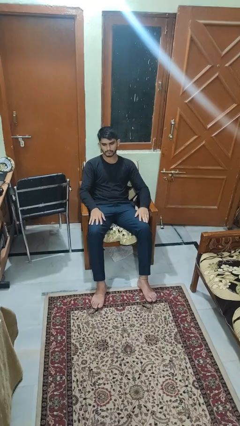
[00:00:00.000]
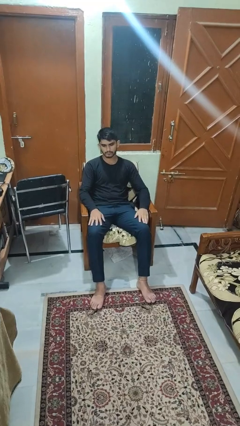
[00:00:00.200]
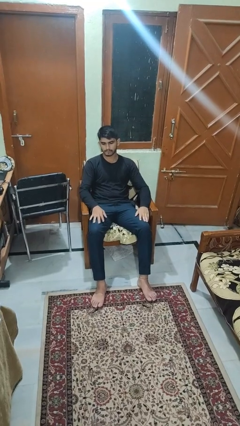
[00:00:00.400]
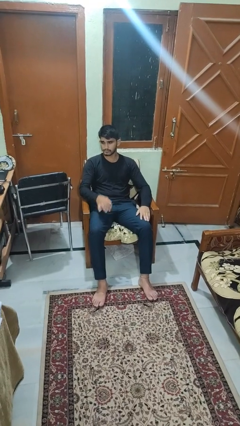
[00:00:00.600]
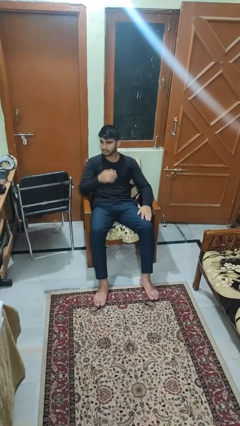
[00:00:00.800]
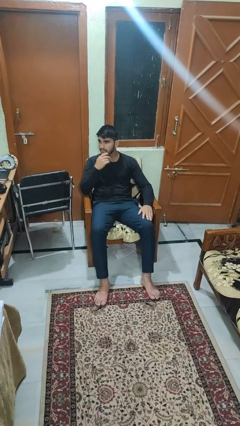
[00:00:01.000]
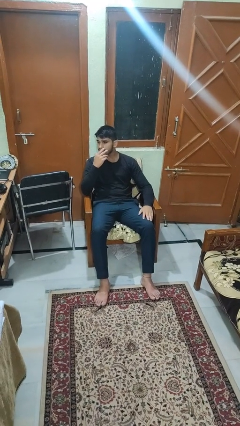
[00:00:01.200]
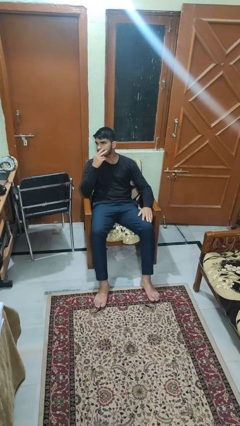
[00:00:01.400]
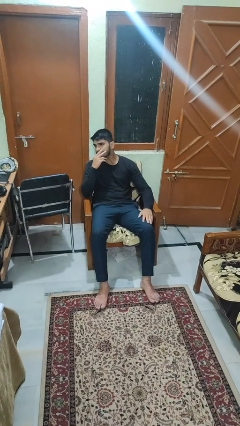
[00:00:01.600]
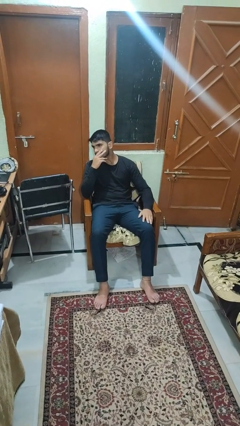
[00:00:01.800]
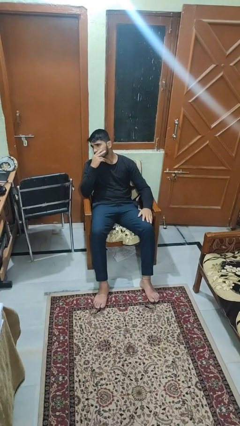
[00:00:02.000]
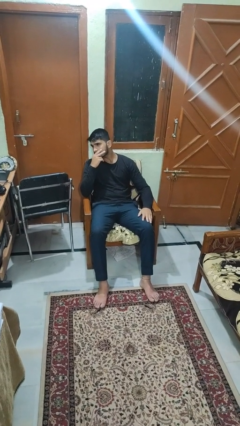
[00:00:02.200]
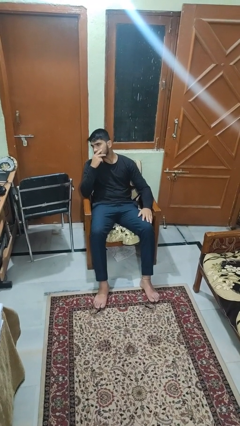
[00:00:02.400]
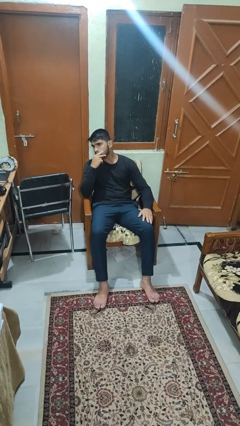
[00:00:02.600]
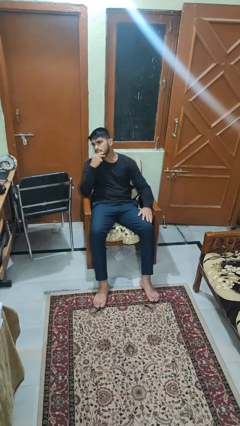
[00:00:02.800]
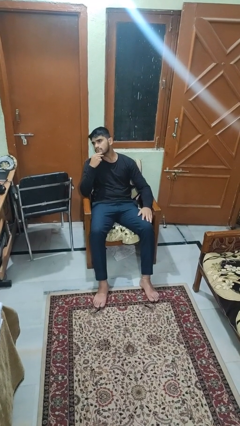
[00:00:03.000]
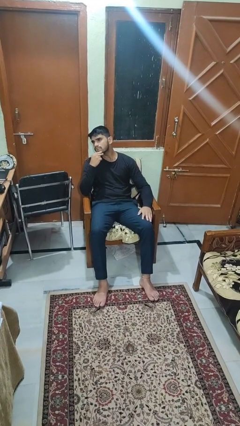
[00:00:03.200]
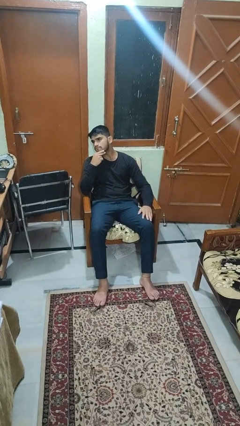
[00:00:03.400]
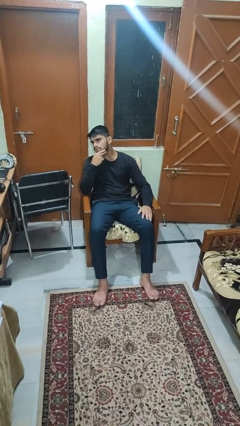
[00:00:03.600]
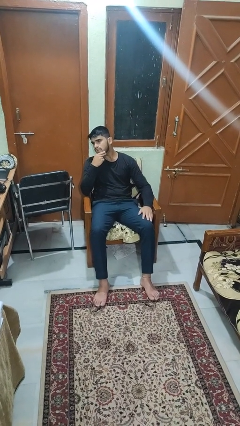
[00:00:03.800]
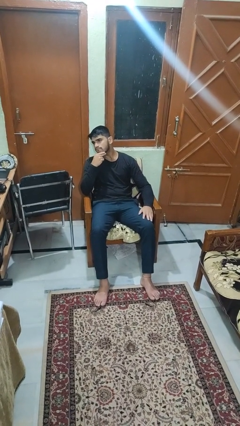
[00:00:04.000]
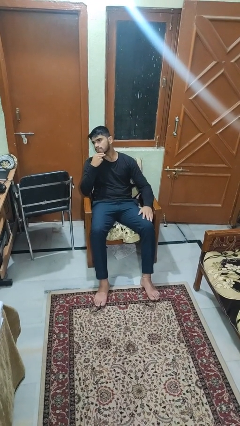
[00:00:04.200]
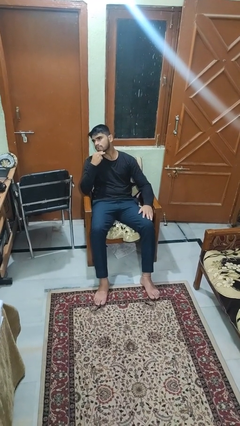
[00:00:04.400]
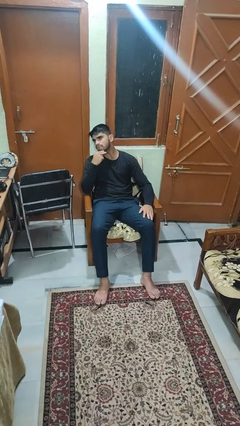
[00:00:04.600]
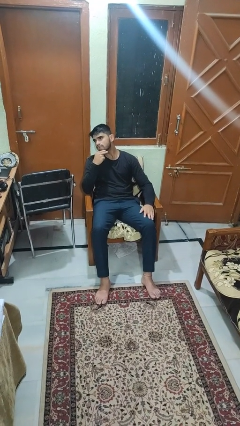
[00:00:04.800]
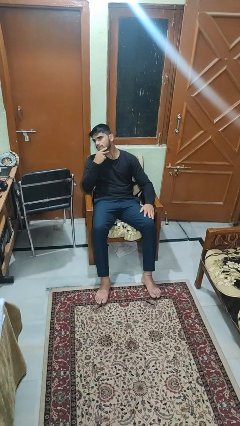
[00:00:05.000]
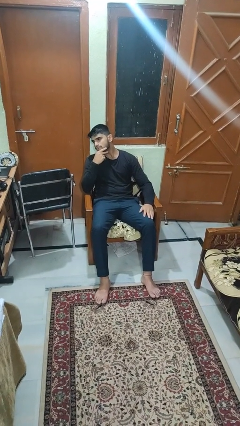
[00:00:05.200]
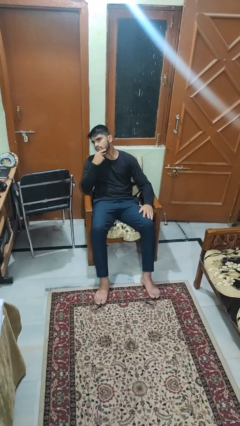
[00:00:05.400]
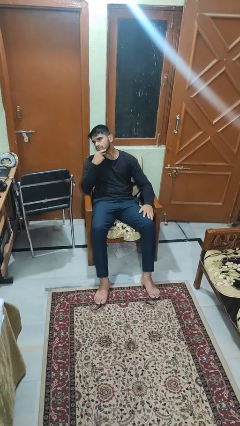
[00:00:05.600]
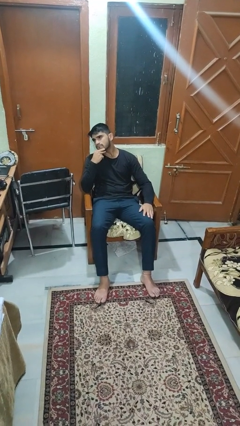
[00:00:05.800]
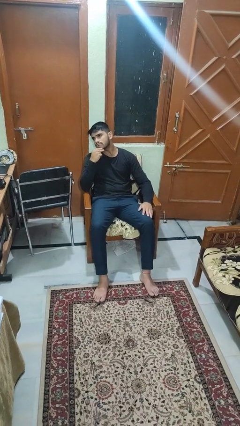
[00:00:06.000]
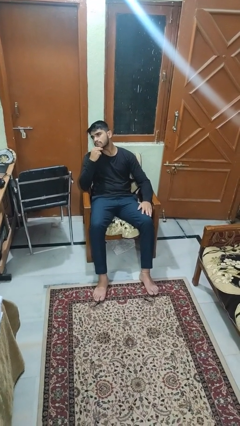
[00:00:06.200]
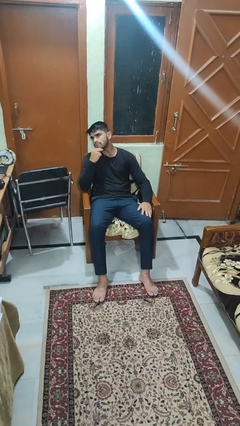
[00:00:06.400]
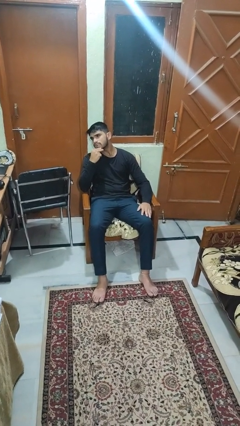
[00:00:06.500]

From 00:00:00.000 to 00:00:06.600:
person strokes chin

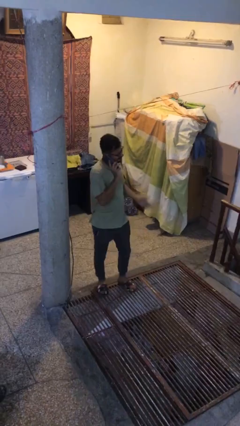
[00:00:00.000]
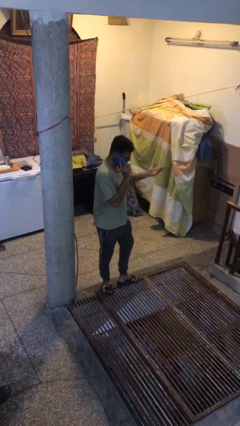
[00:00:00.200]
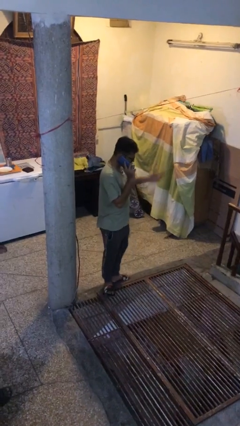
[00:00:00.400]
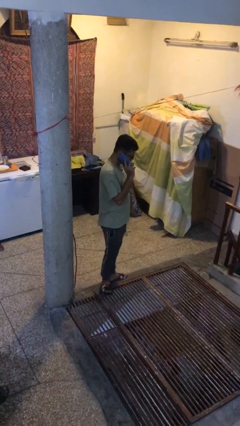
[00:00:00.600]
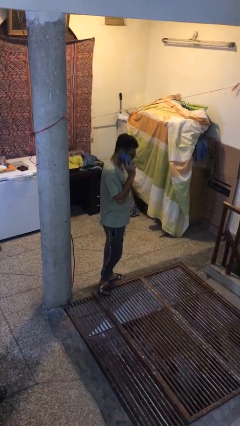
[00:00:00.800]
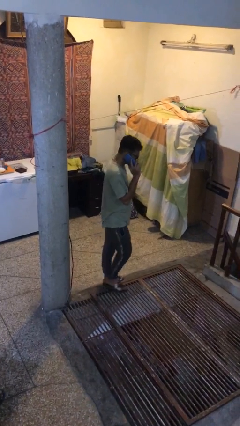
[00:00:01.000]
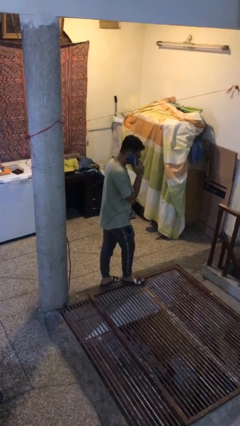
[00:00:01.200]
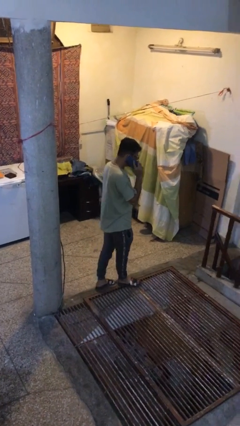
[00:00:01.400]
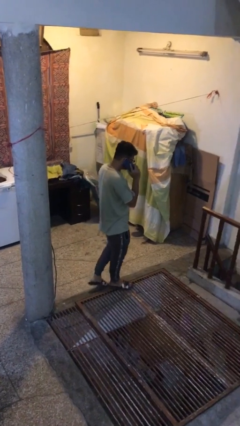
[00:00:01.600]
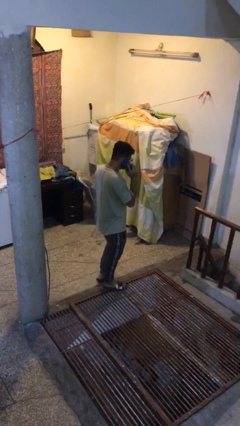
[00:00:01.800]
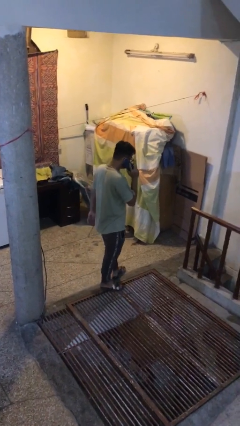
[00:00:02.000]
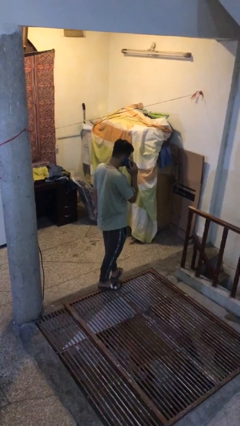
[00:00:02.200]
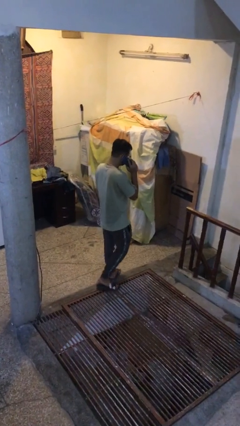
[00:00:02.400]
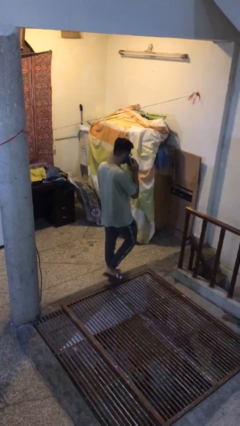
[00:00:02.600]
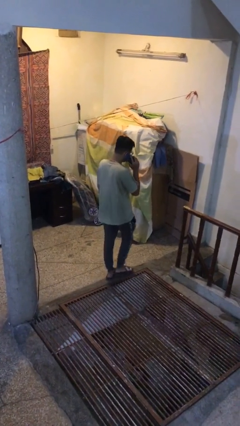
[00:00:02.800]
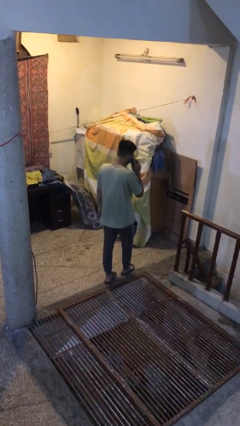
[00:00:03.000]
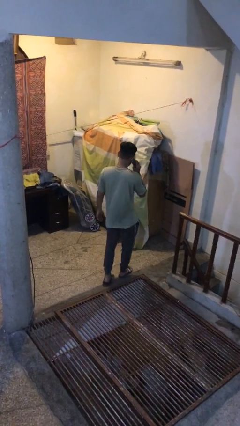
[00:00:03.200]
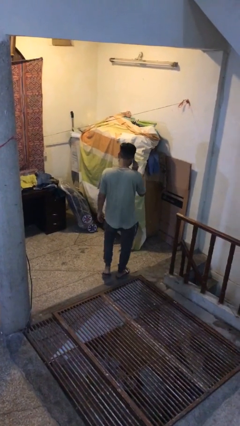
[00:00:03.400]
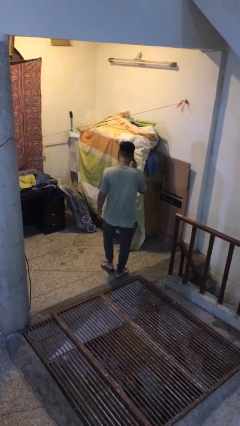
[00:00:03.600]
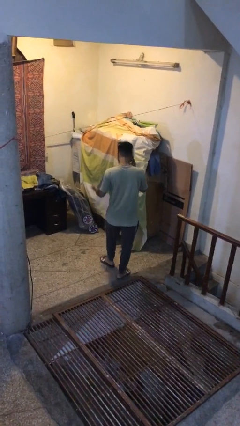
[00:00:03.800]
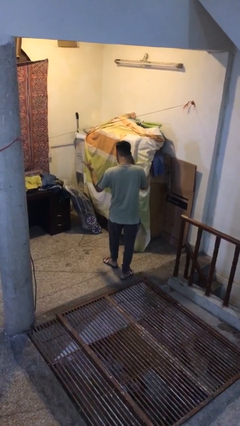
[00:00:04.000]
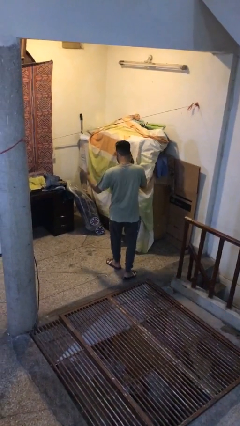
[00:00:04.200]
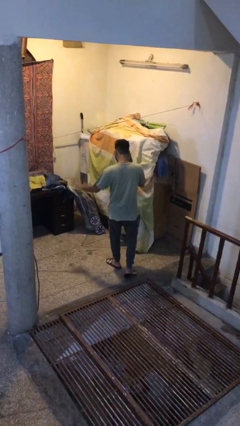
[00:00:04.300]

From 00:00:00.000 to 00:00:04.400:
person talks on phone

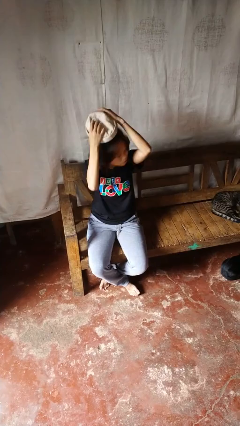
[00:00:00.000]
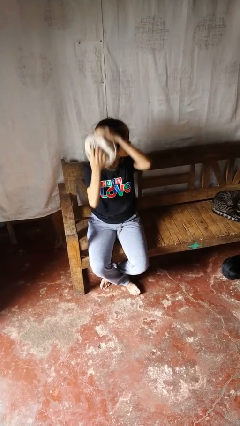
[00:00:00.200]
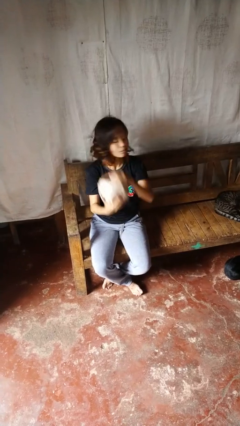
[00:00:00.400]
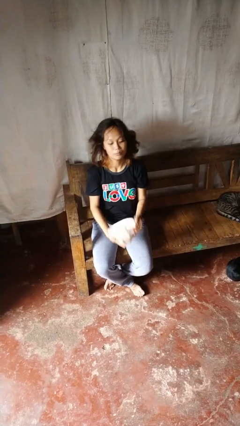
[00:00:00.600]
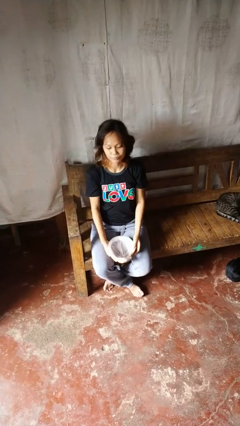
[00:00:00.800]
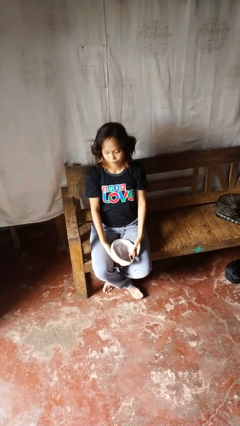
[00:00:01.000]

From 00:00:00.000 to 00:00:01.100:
person takes off hat

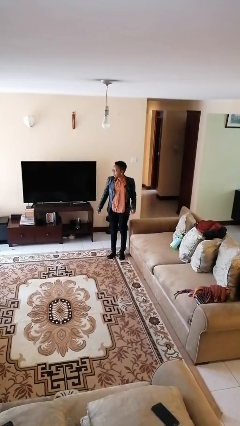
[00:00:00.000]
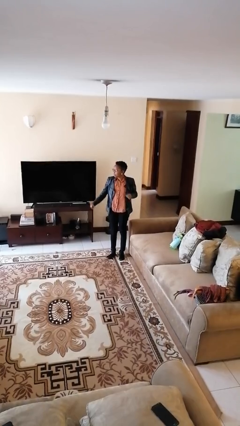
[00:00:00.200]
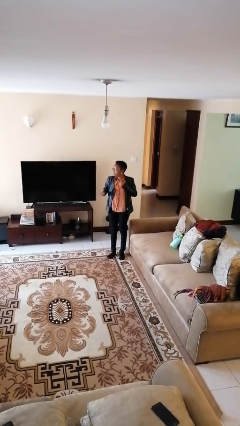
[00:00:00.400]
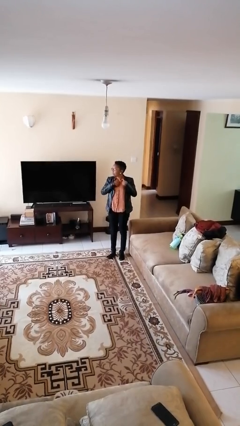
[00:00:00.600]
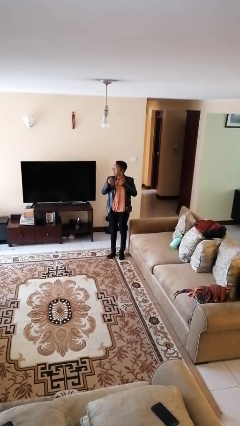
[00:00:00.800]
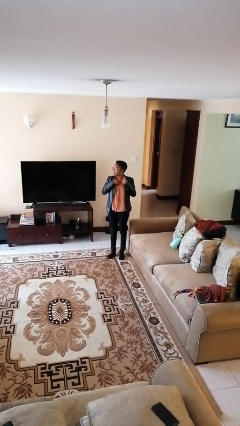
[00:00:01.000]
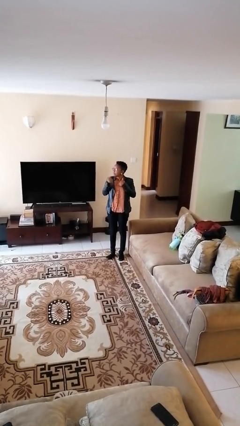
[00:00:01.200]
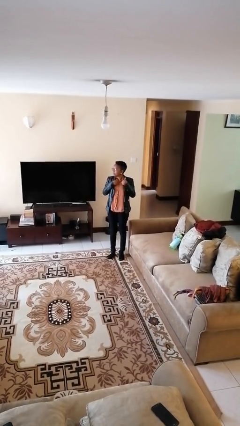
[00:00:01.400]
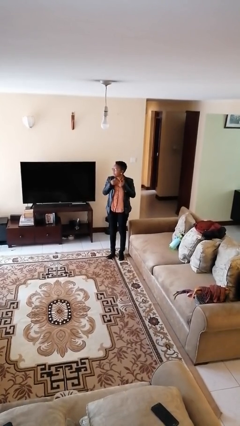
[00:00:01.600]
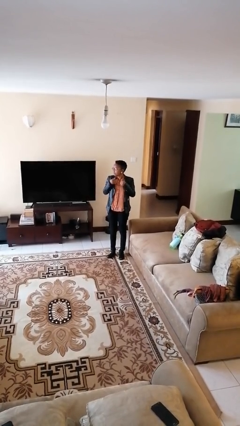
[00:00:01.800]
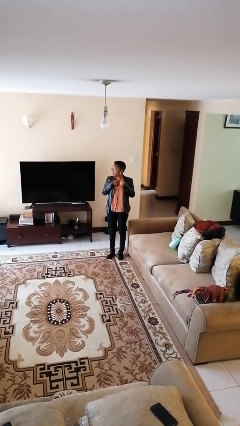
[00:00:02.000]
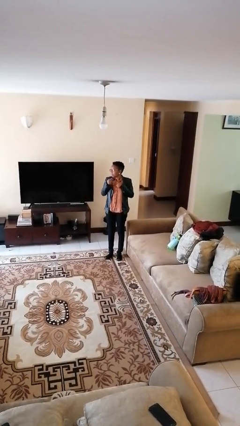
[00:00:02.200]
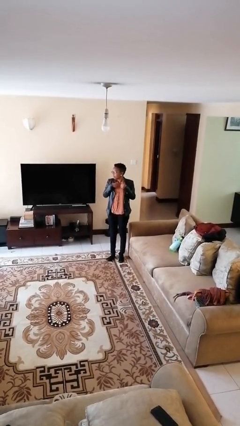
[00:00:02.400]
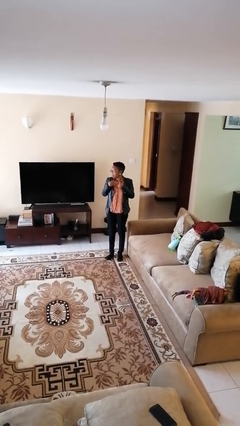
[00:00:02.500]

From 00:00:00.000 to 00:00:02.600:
person drums on chest

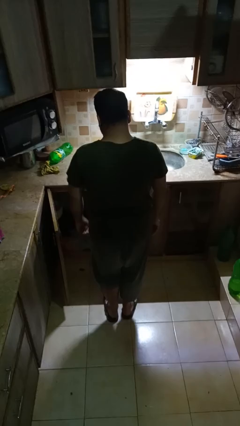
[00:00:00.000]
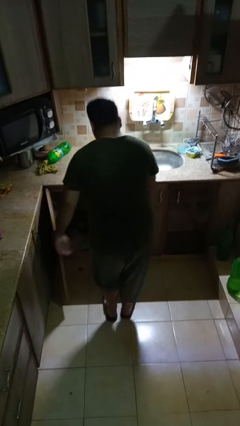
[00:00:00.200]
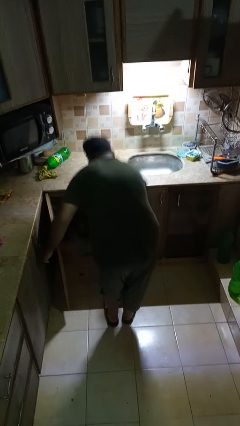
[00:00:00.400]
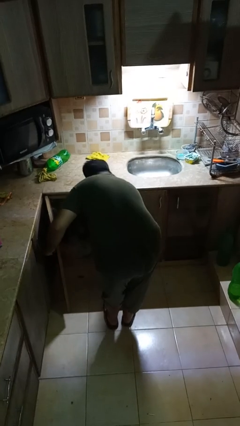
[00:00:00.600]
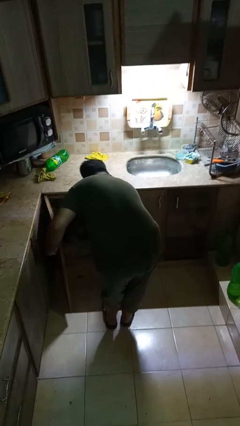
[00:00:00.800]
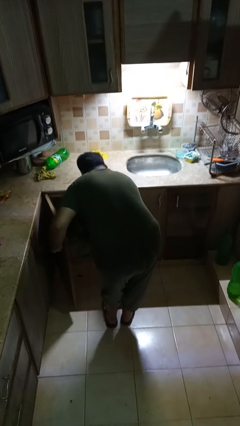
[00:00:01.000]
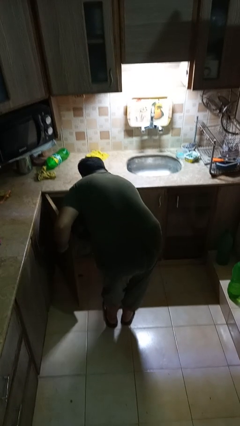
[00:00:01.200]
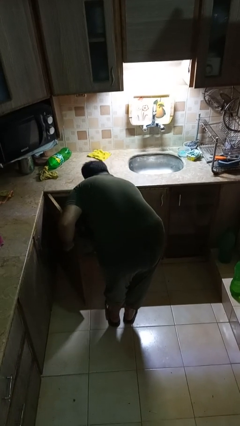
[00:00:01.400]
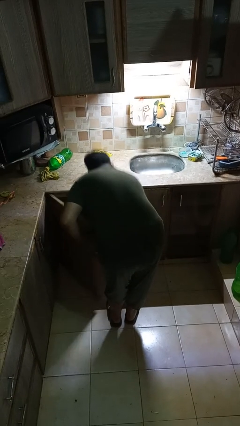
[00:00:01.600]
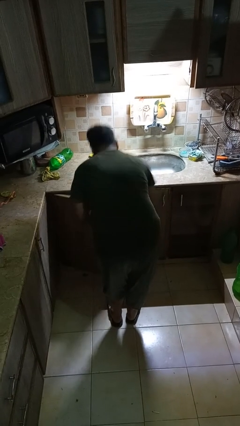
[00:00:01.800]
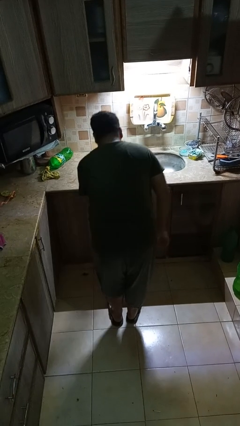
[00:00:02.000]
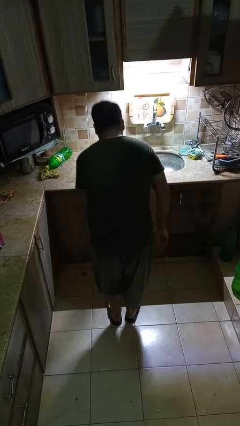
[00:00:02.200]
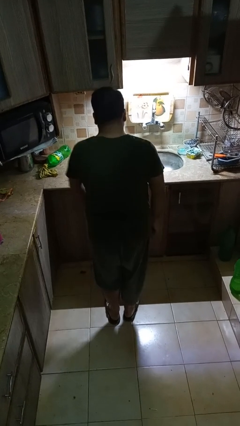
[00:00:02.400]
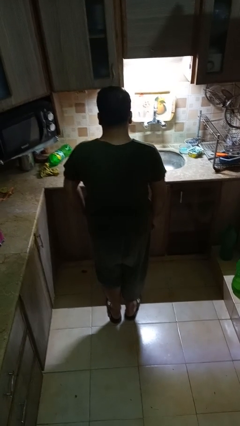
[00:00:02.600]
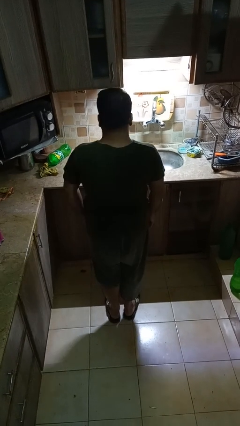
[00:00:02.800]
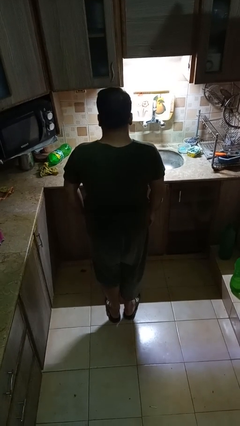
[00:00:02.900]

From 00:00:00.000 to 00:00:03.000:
person puts object in cabinet

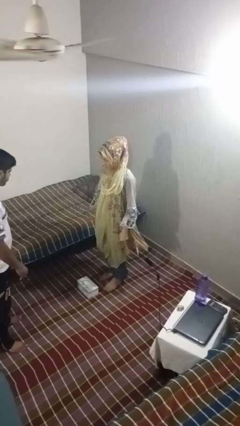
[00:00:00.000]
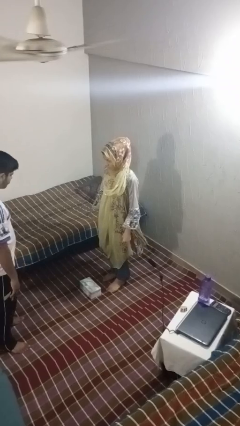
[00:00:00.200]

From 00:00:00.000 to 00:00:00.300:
person kicks object to person
